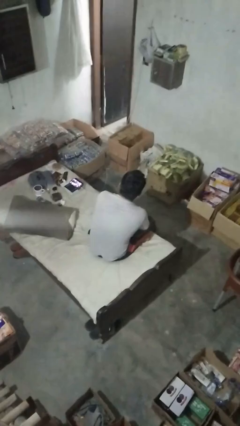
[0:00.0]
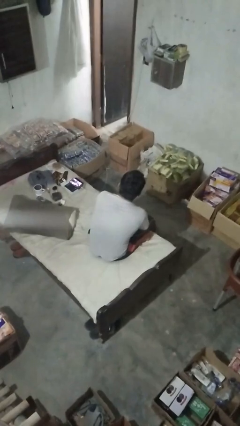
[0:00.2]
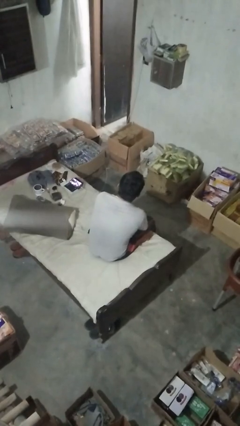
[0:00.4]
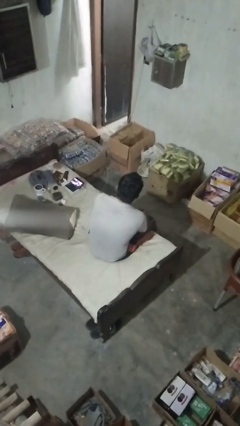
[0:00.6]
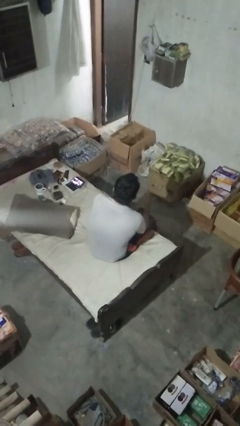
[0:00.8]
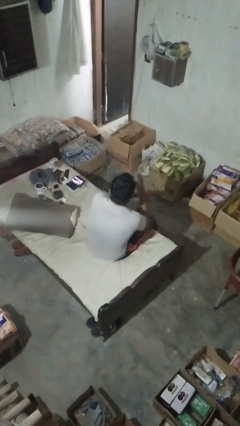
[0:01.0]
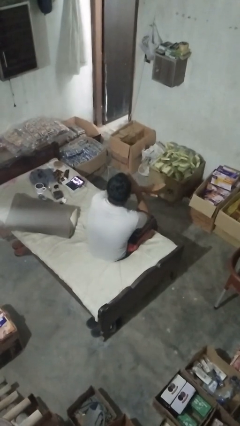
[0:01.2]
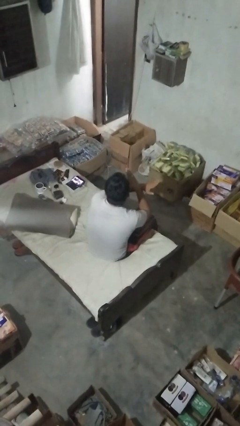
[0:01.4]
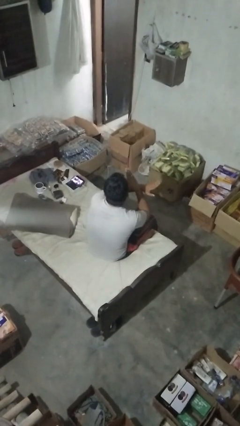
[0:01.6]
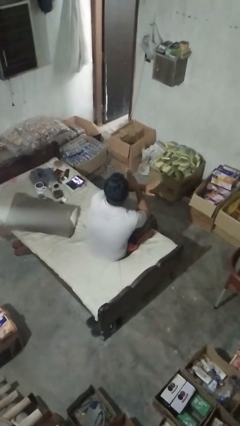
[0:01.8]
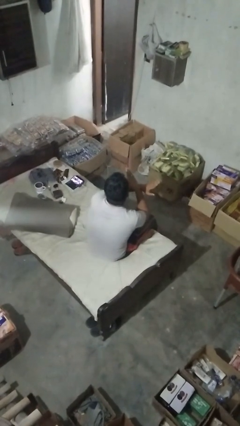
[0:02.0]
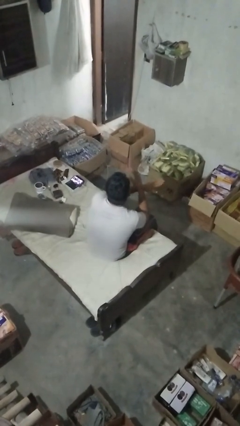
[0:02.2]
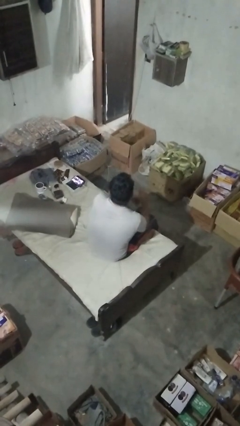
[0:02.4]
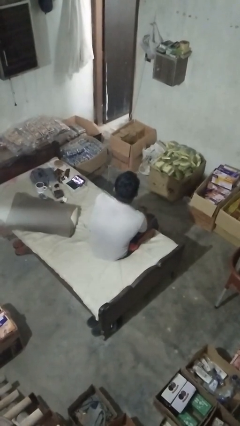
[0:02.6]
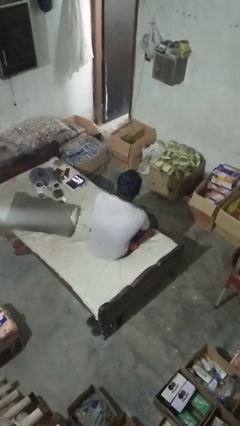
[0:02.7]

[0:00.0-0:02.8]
person gestures arms x

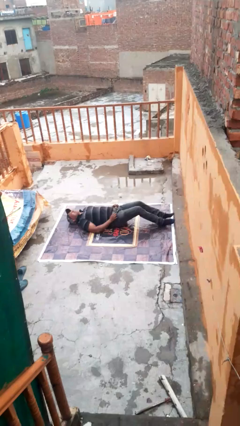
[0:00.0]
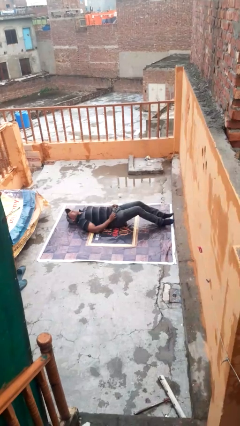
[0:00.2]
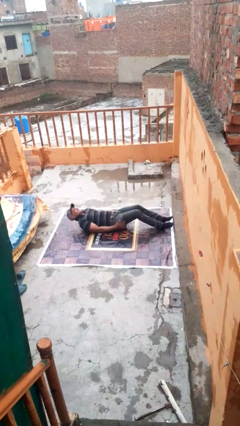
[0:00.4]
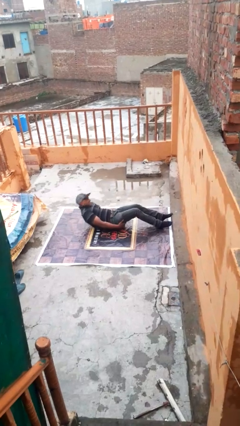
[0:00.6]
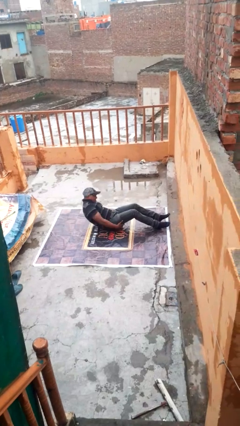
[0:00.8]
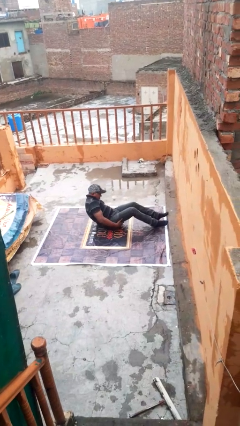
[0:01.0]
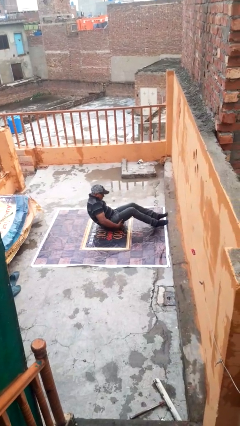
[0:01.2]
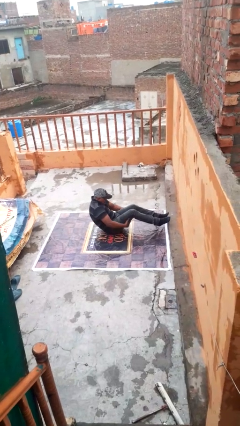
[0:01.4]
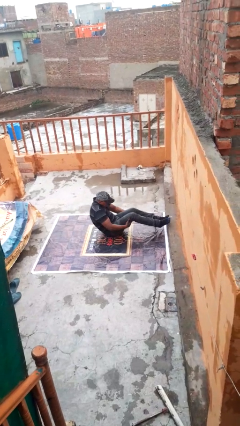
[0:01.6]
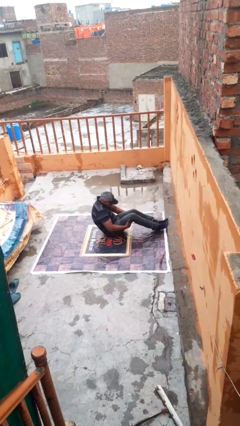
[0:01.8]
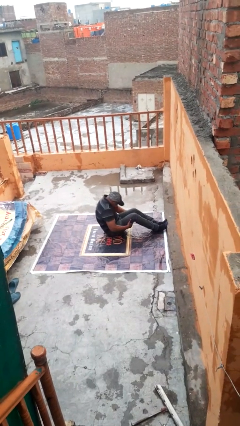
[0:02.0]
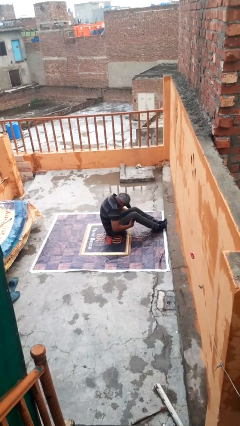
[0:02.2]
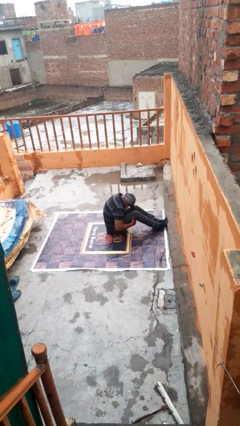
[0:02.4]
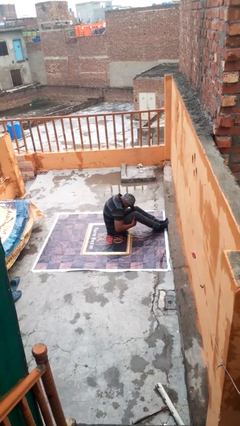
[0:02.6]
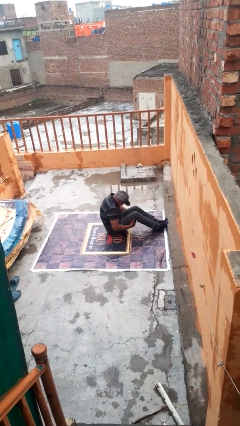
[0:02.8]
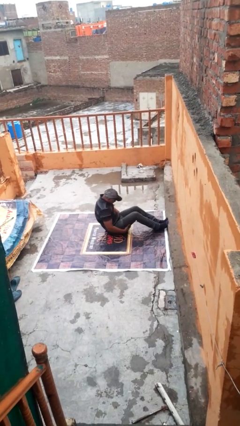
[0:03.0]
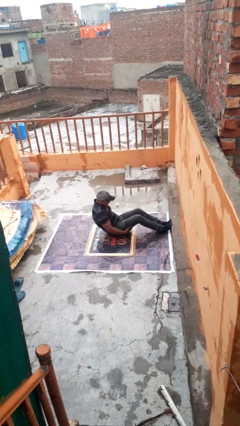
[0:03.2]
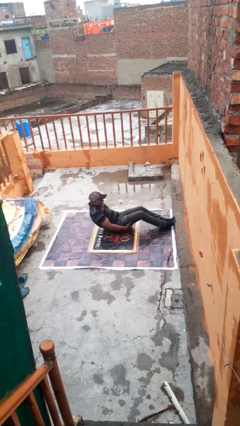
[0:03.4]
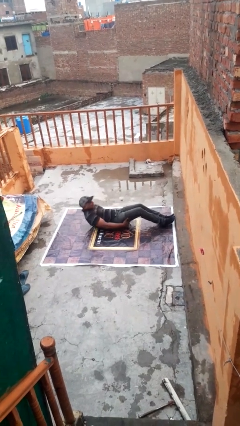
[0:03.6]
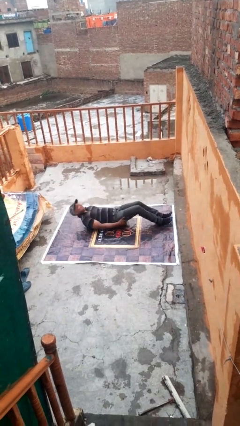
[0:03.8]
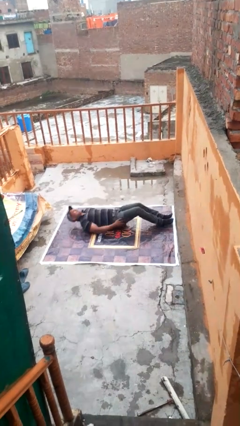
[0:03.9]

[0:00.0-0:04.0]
person exercises with situp

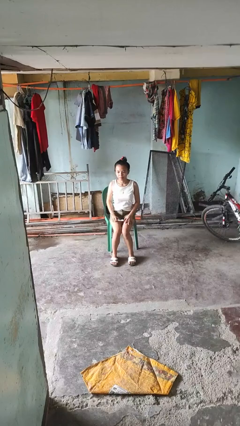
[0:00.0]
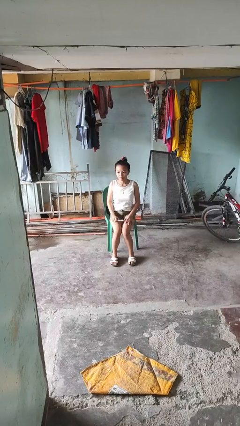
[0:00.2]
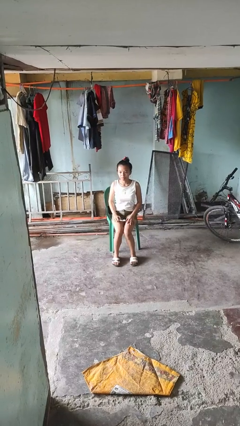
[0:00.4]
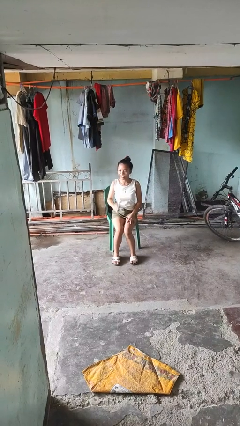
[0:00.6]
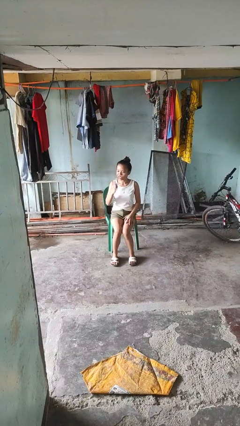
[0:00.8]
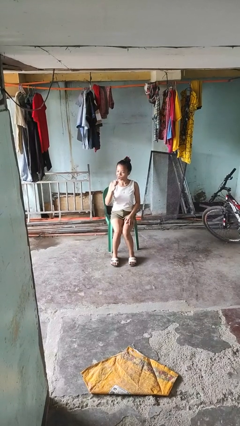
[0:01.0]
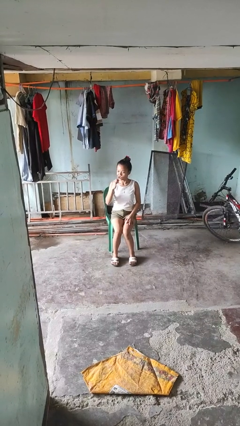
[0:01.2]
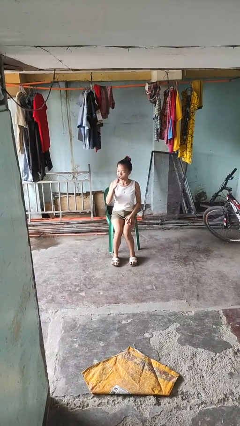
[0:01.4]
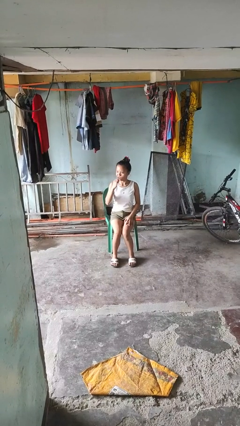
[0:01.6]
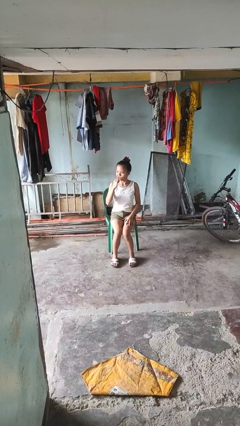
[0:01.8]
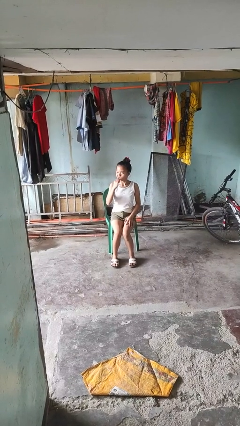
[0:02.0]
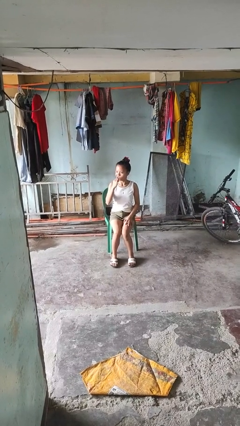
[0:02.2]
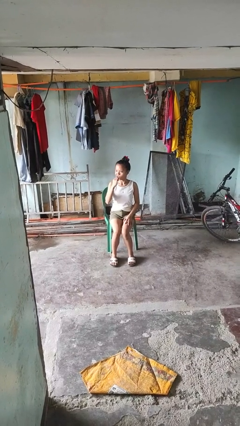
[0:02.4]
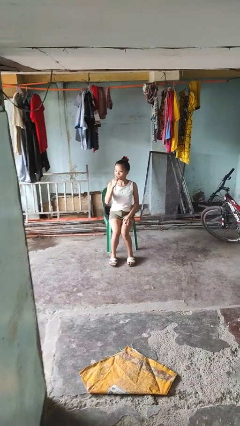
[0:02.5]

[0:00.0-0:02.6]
person brushes teeth

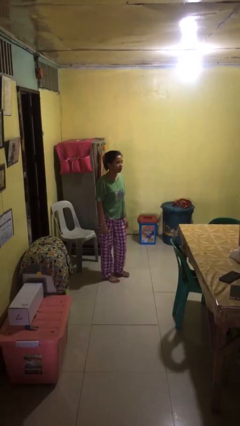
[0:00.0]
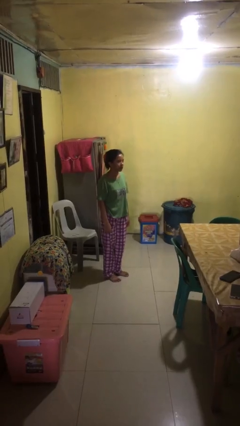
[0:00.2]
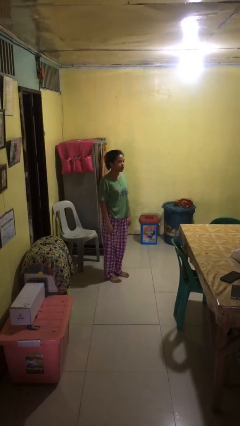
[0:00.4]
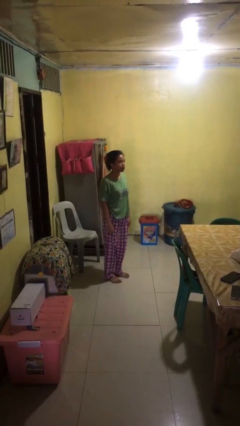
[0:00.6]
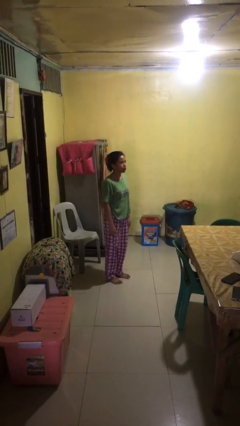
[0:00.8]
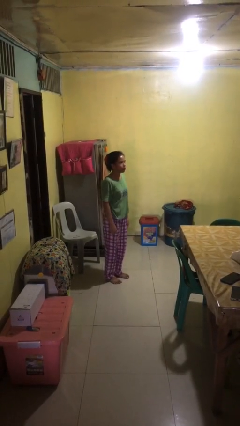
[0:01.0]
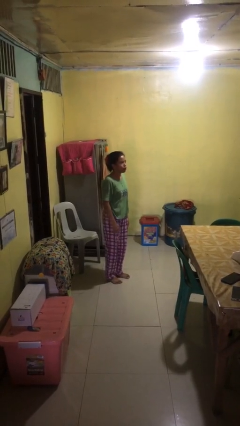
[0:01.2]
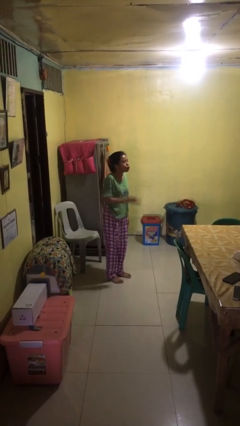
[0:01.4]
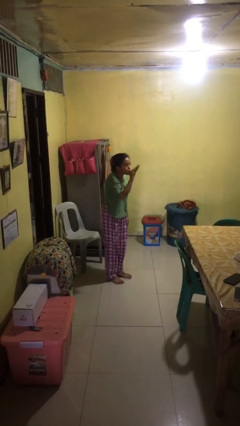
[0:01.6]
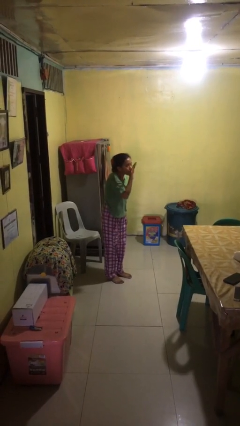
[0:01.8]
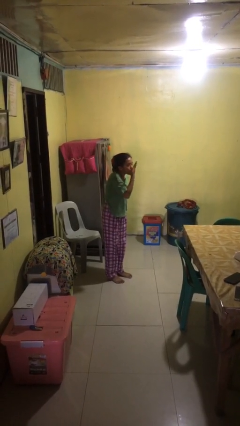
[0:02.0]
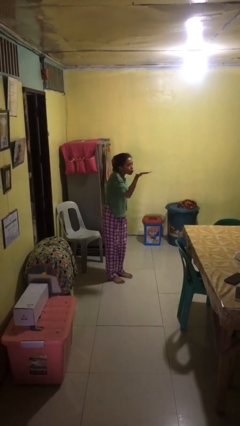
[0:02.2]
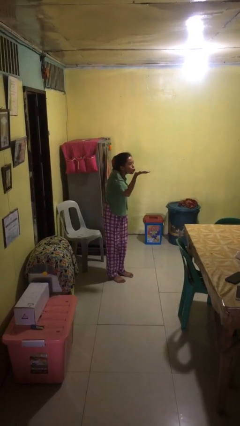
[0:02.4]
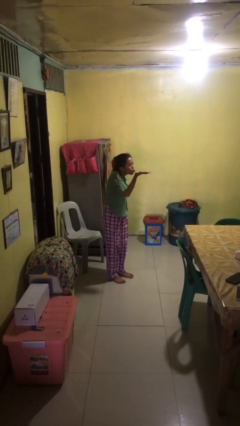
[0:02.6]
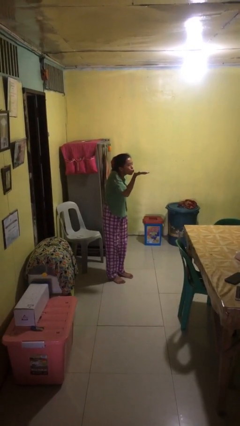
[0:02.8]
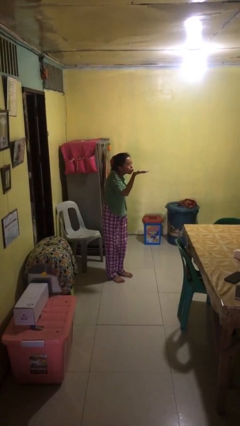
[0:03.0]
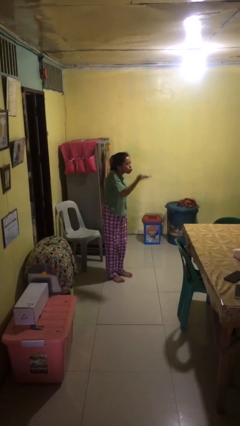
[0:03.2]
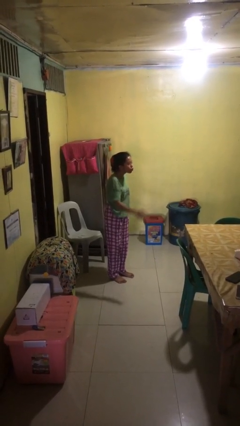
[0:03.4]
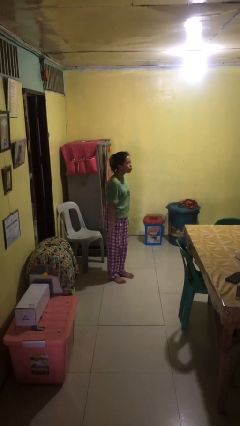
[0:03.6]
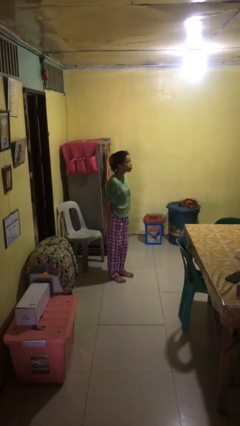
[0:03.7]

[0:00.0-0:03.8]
person gestures blow kiss

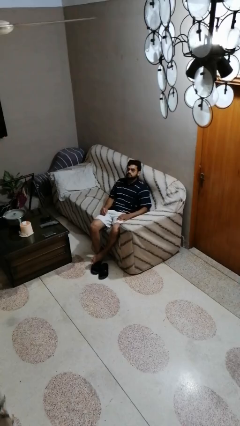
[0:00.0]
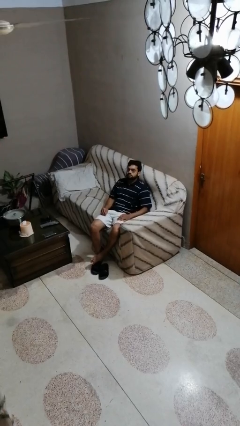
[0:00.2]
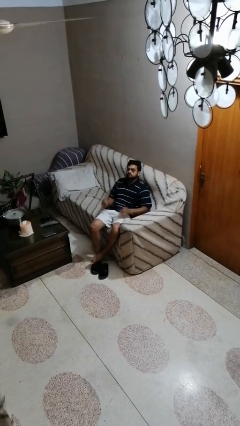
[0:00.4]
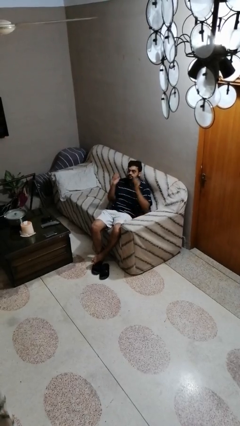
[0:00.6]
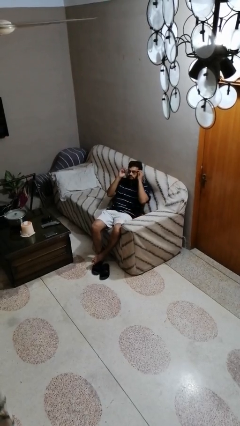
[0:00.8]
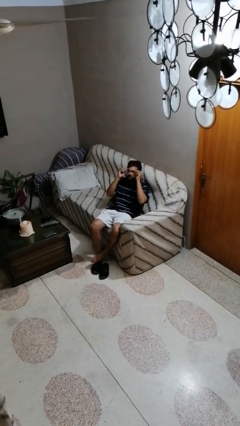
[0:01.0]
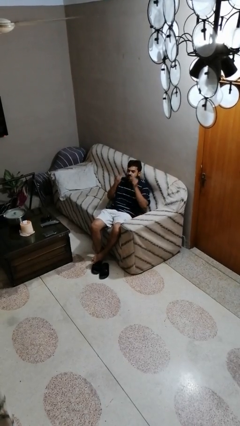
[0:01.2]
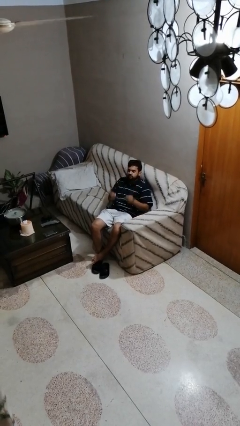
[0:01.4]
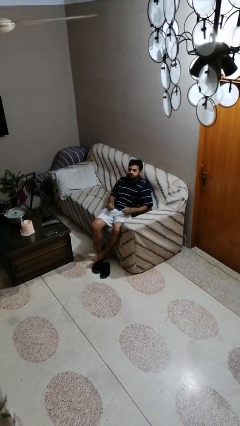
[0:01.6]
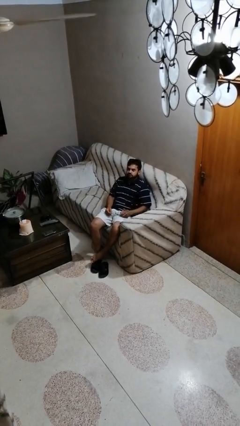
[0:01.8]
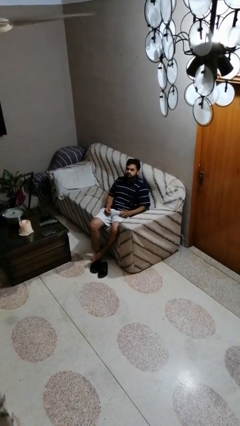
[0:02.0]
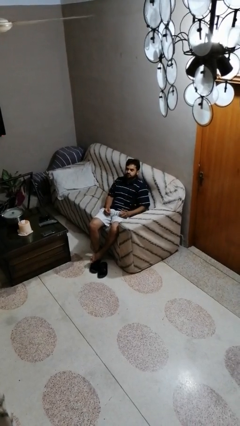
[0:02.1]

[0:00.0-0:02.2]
person takes off glasses

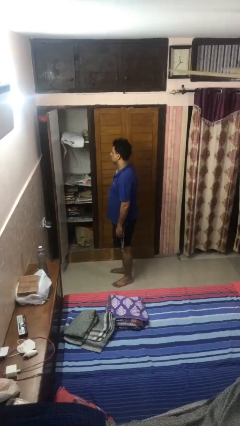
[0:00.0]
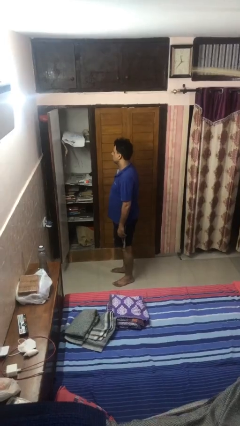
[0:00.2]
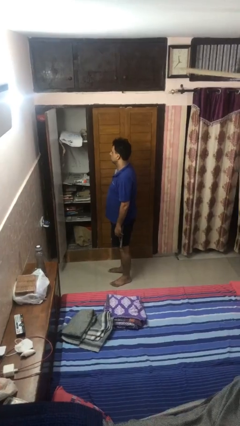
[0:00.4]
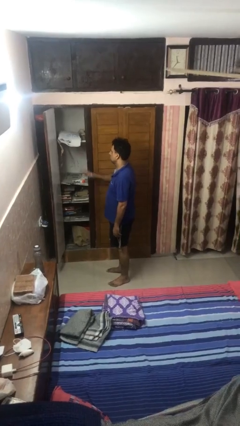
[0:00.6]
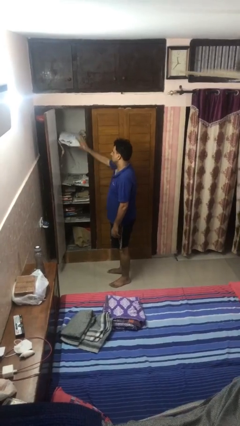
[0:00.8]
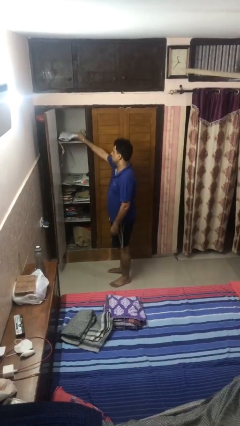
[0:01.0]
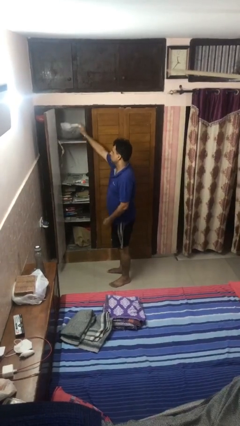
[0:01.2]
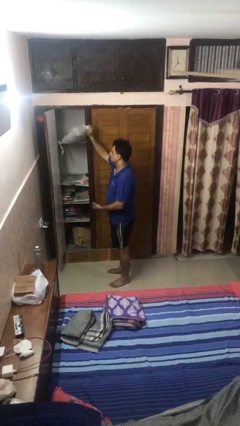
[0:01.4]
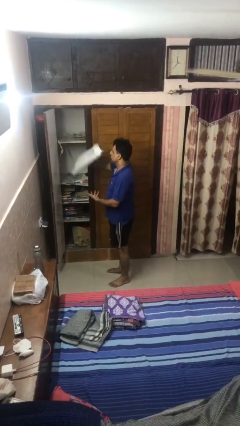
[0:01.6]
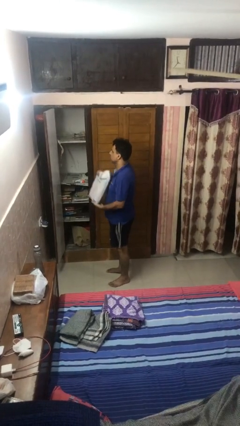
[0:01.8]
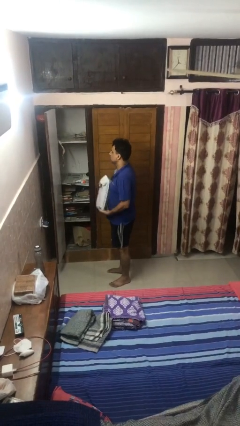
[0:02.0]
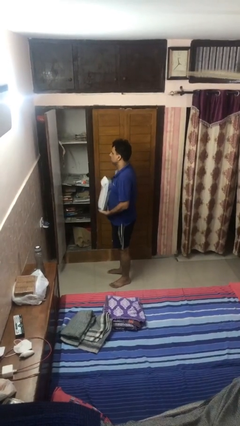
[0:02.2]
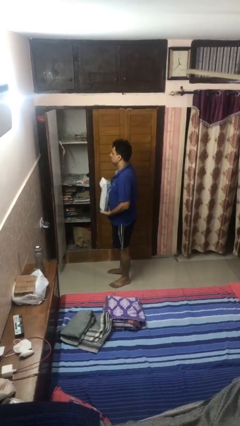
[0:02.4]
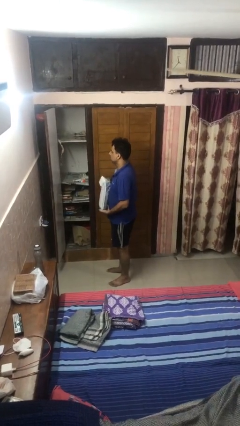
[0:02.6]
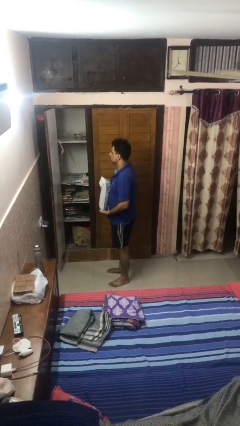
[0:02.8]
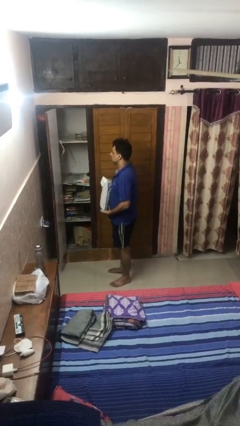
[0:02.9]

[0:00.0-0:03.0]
person picks up object from shelf
